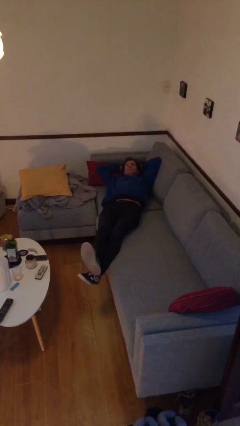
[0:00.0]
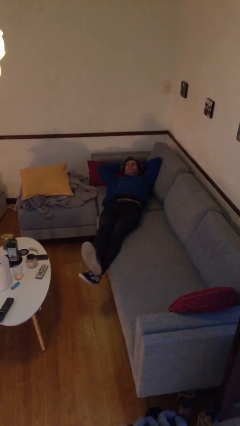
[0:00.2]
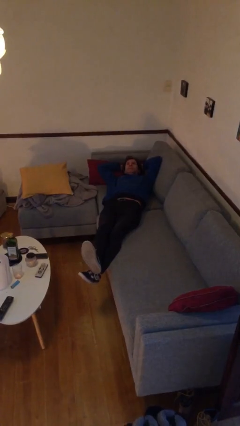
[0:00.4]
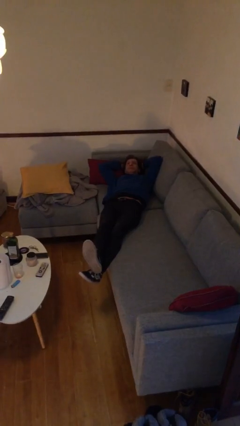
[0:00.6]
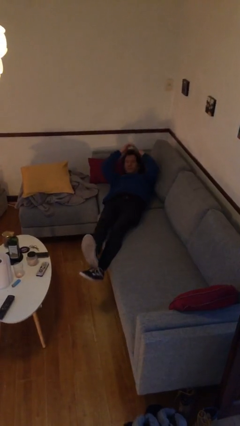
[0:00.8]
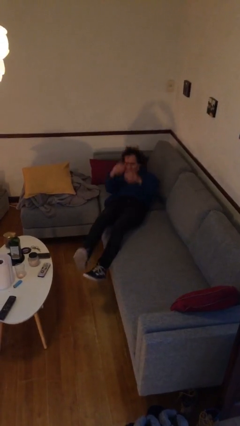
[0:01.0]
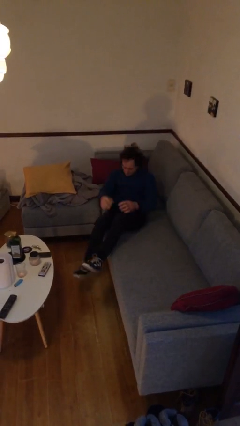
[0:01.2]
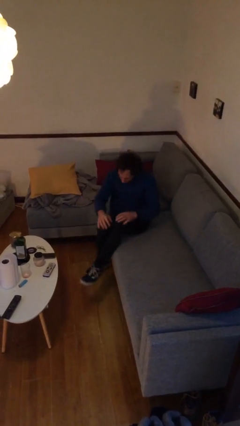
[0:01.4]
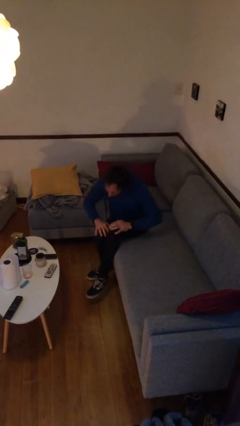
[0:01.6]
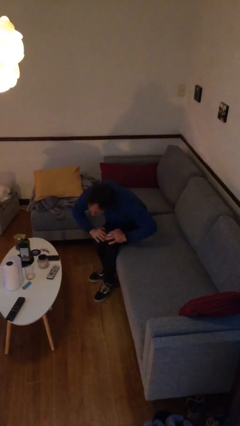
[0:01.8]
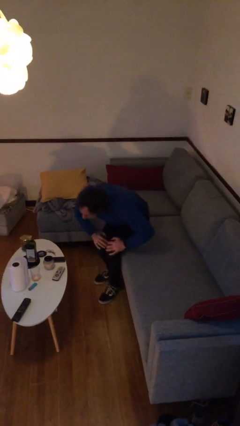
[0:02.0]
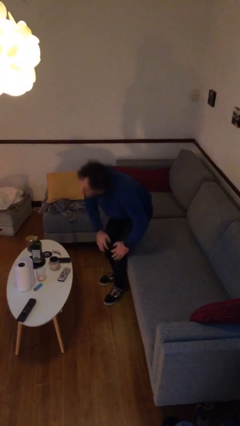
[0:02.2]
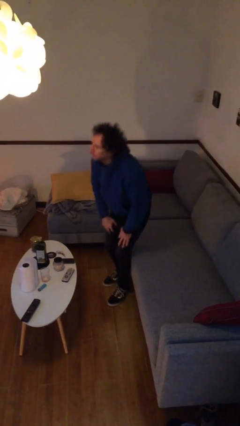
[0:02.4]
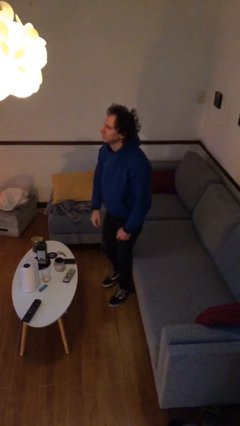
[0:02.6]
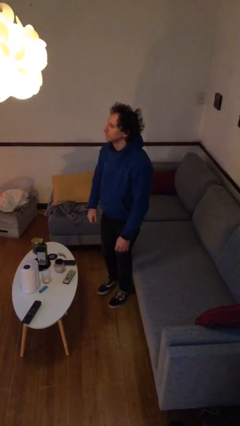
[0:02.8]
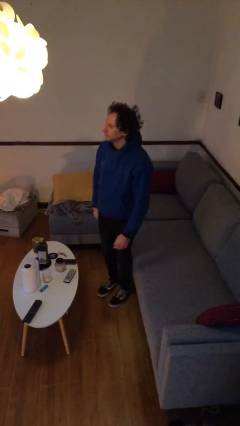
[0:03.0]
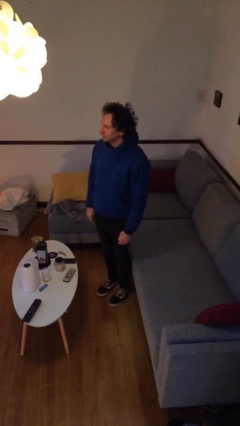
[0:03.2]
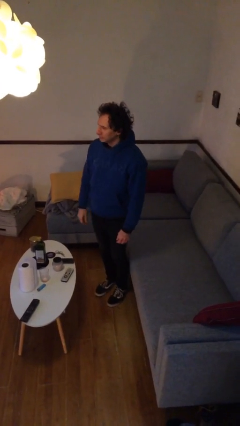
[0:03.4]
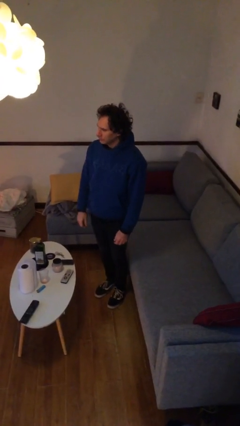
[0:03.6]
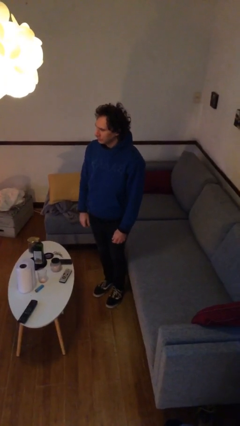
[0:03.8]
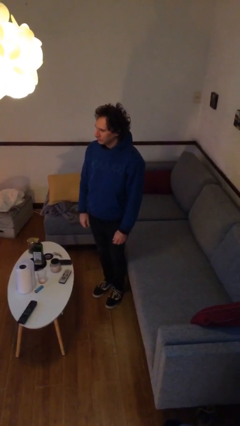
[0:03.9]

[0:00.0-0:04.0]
person stands up

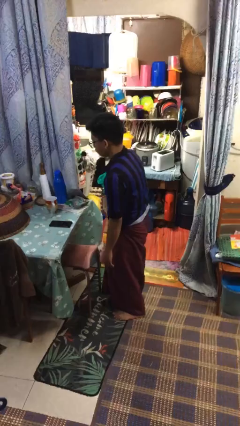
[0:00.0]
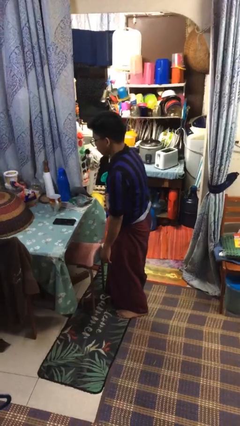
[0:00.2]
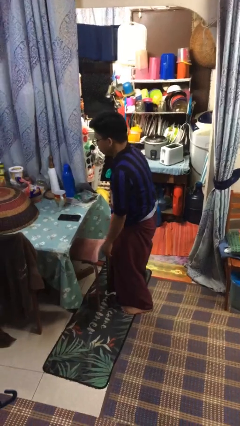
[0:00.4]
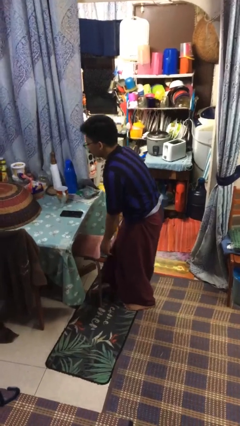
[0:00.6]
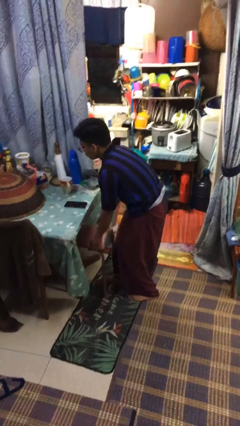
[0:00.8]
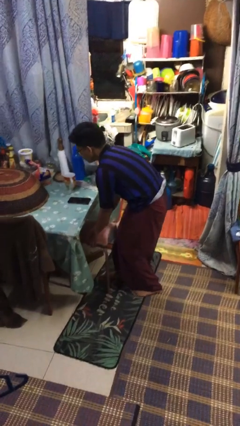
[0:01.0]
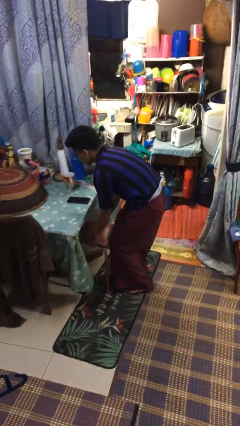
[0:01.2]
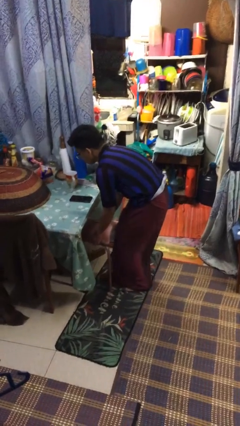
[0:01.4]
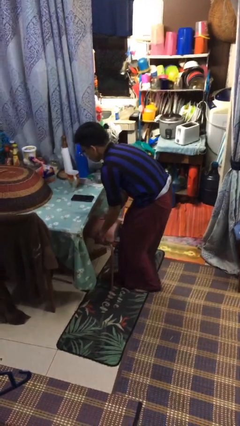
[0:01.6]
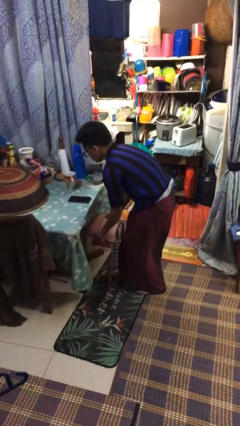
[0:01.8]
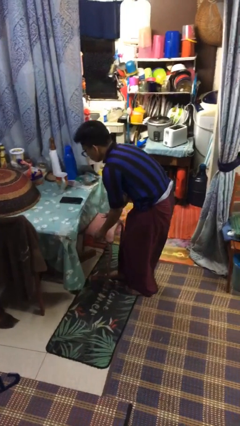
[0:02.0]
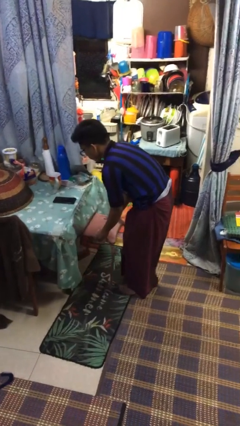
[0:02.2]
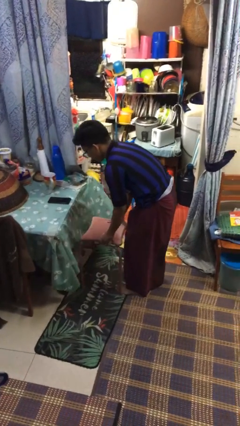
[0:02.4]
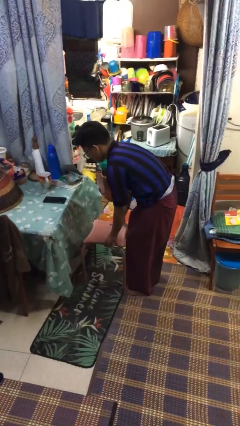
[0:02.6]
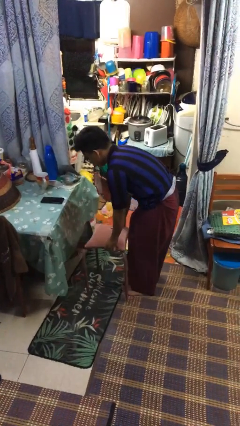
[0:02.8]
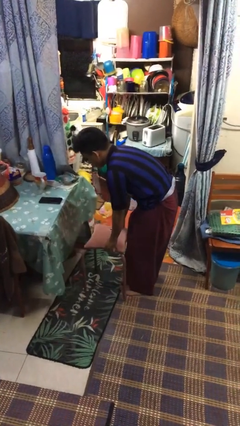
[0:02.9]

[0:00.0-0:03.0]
person pulls out chair

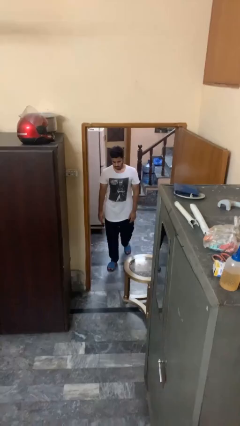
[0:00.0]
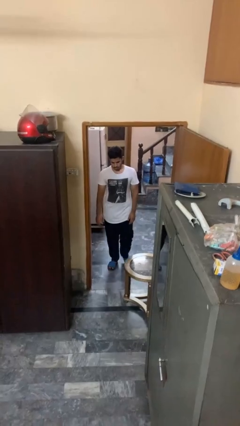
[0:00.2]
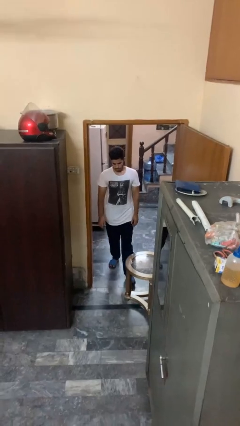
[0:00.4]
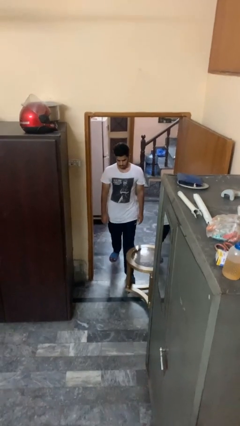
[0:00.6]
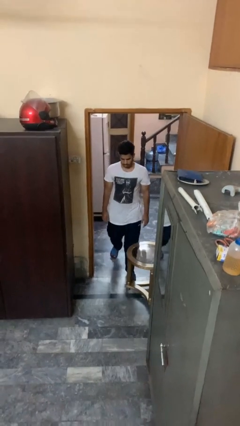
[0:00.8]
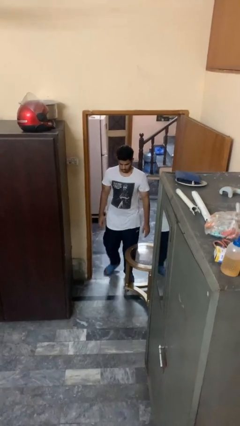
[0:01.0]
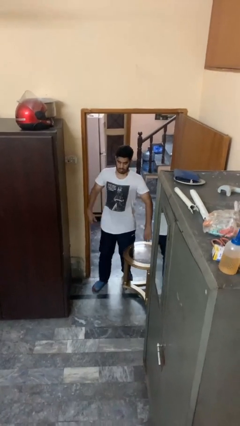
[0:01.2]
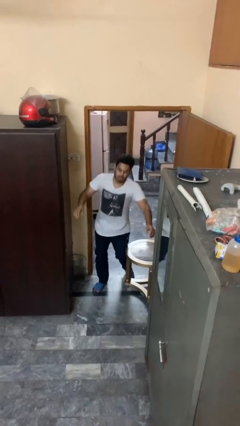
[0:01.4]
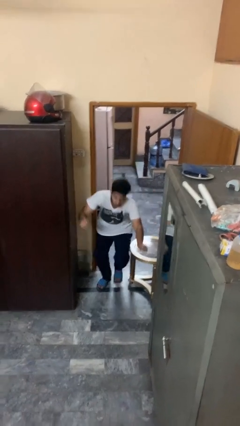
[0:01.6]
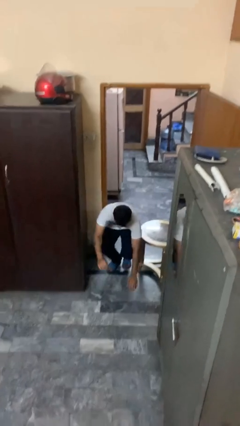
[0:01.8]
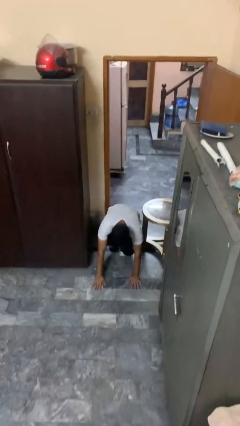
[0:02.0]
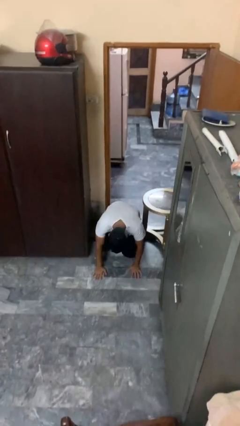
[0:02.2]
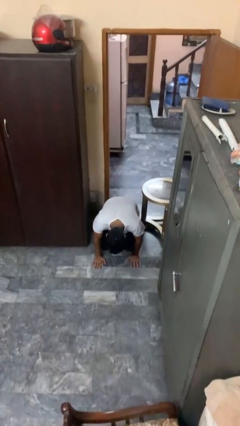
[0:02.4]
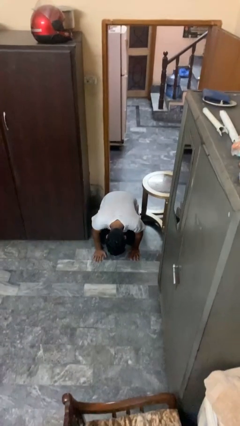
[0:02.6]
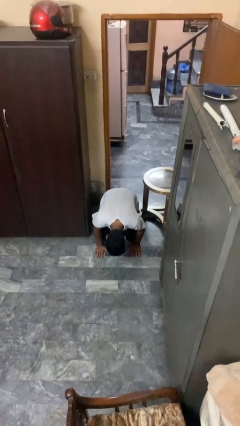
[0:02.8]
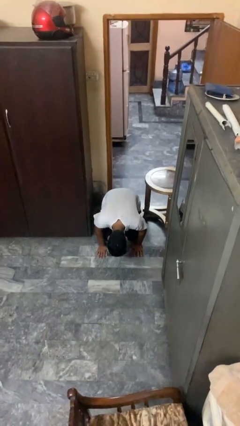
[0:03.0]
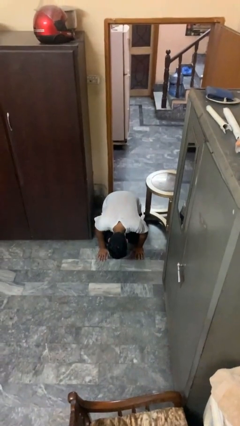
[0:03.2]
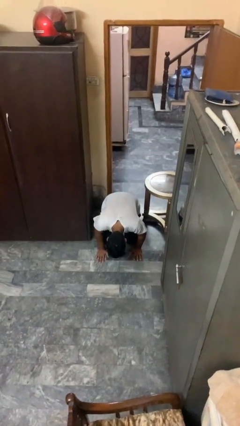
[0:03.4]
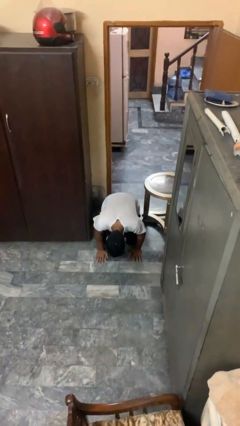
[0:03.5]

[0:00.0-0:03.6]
person trips on object on floor

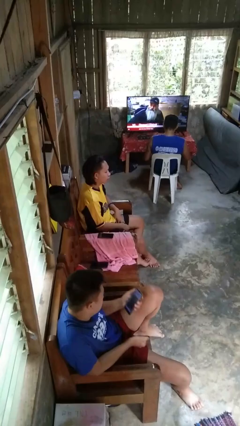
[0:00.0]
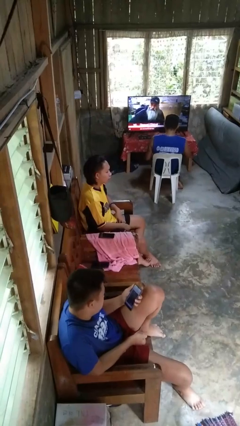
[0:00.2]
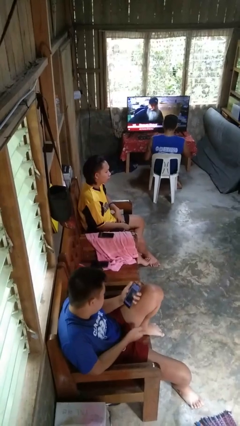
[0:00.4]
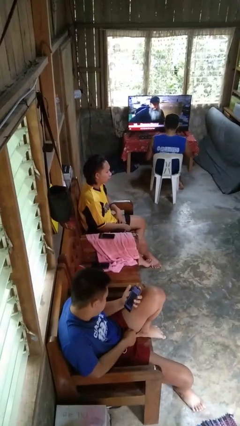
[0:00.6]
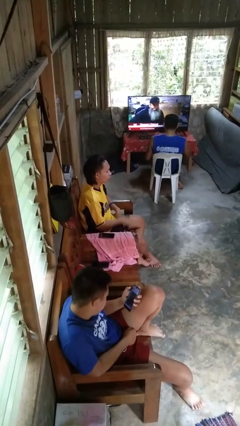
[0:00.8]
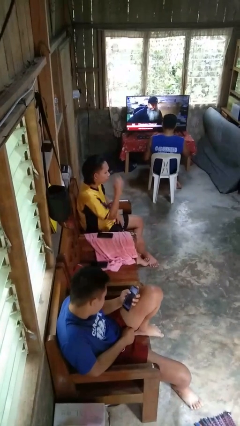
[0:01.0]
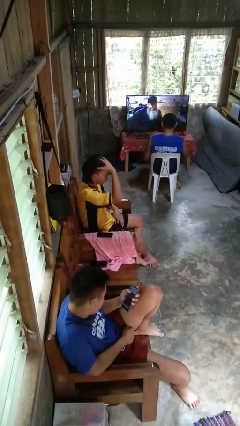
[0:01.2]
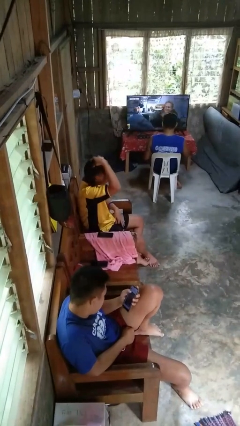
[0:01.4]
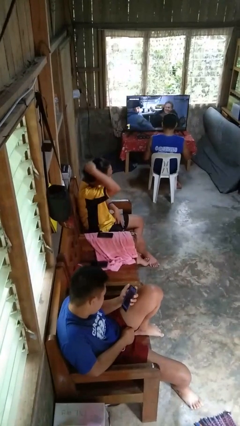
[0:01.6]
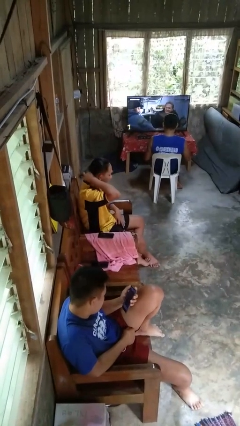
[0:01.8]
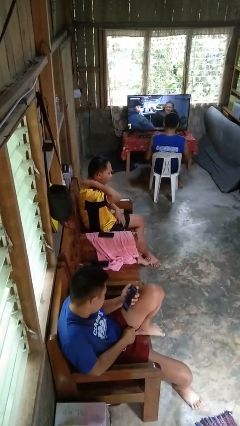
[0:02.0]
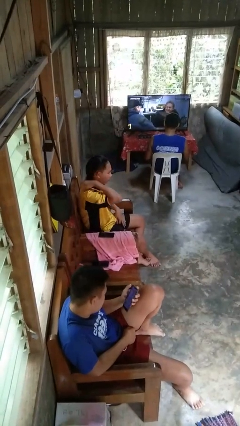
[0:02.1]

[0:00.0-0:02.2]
person strokes hair

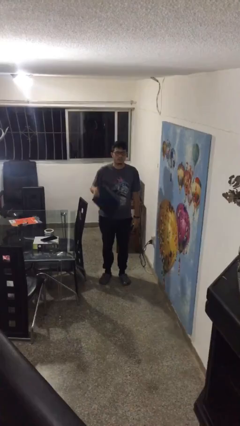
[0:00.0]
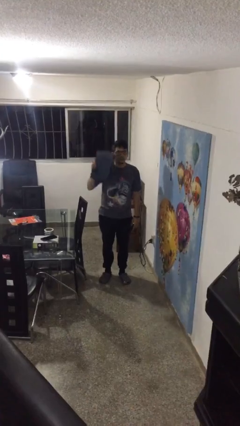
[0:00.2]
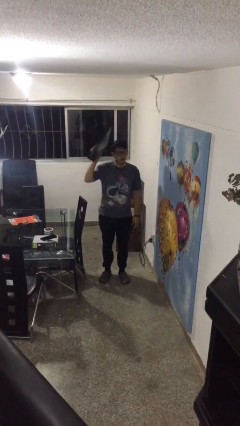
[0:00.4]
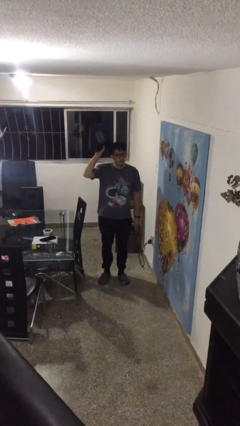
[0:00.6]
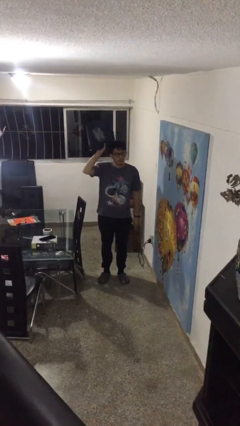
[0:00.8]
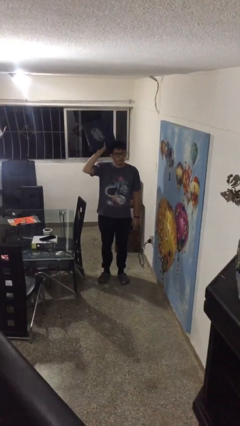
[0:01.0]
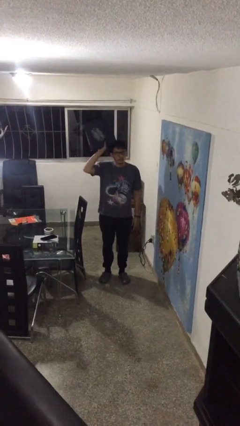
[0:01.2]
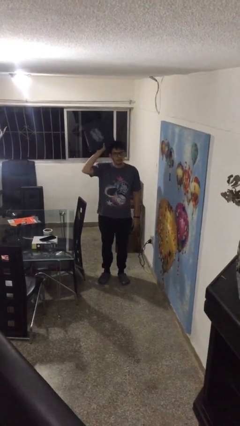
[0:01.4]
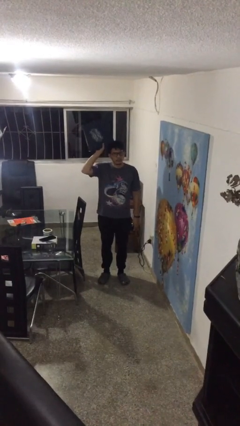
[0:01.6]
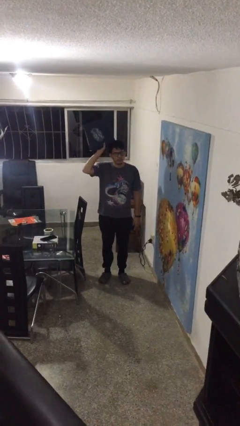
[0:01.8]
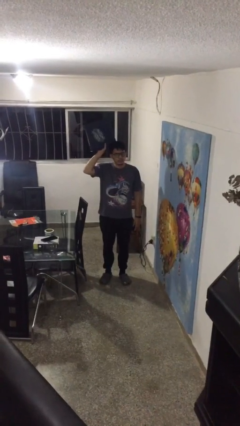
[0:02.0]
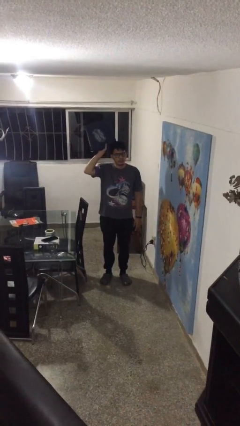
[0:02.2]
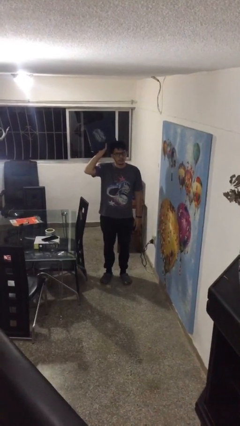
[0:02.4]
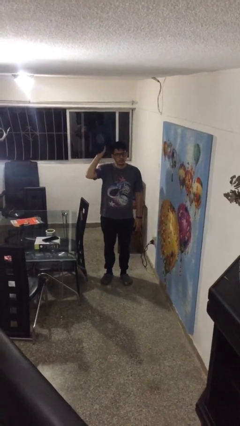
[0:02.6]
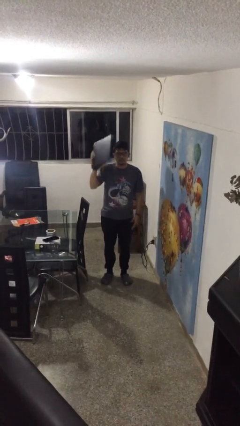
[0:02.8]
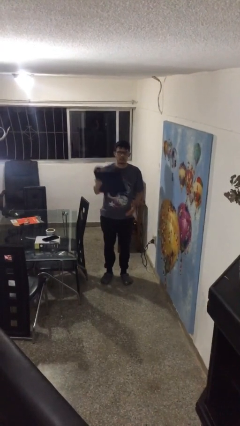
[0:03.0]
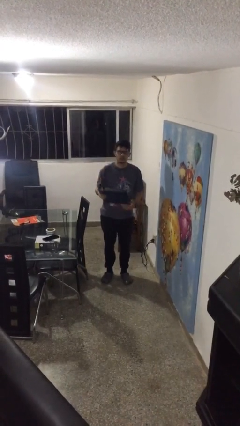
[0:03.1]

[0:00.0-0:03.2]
person holds object above head

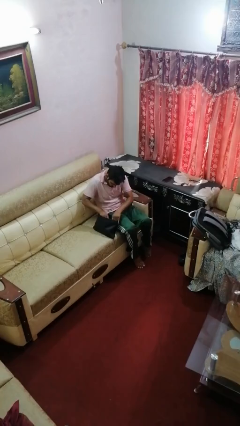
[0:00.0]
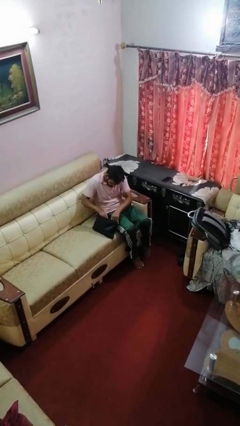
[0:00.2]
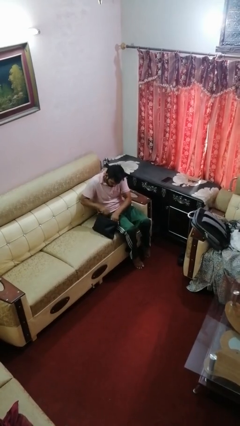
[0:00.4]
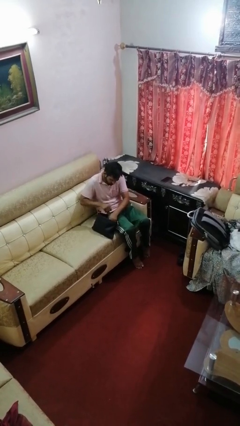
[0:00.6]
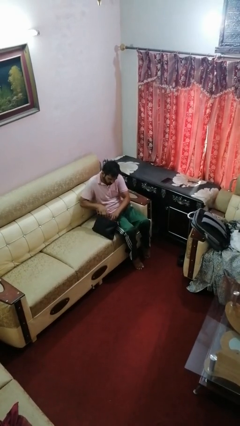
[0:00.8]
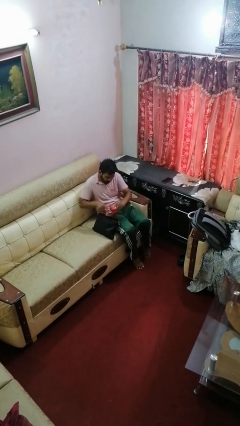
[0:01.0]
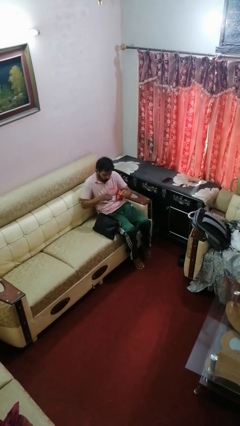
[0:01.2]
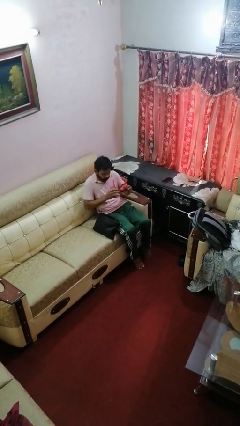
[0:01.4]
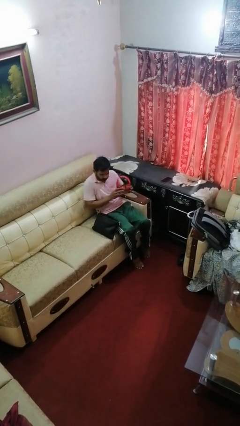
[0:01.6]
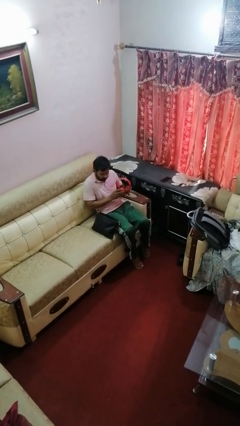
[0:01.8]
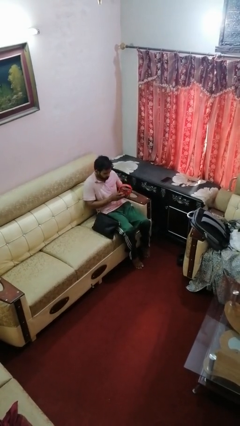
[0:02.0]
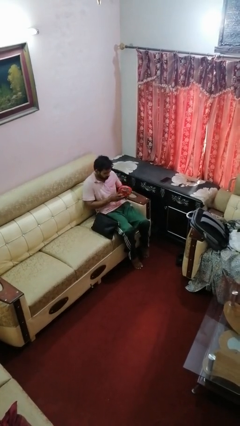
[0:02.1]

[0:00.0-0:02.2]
person takes object from purse
